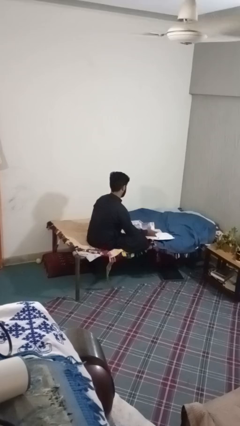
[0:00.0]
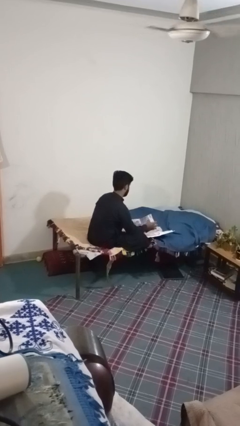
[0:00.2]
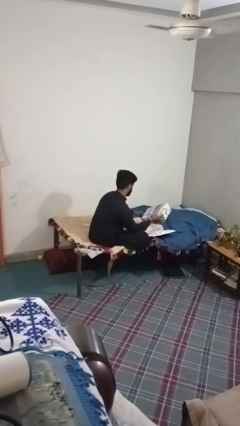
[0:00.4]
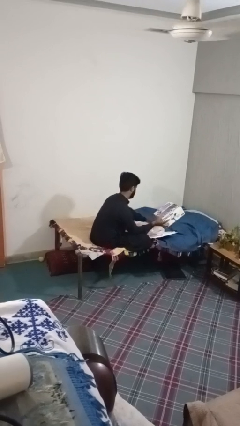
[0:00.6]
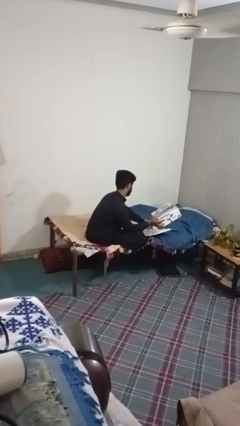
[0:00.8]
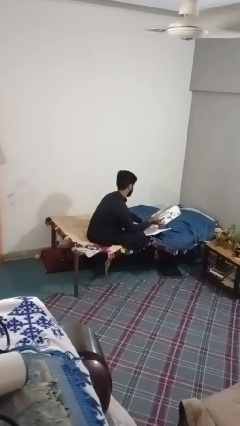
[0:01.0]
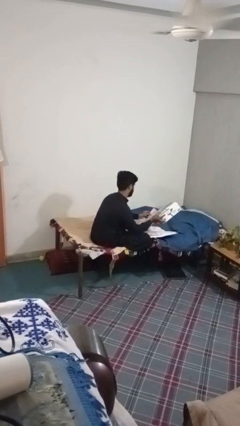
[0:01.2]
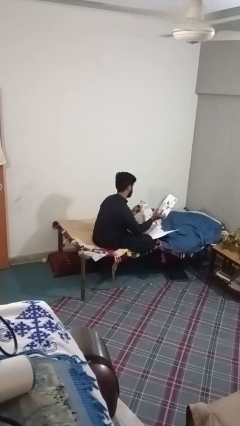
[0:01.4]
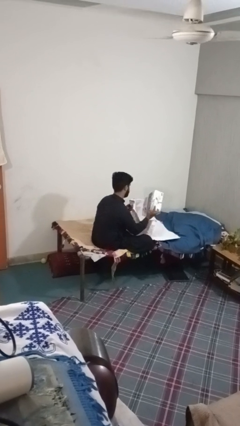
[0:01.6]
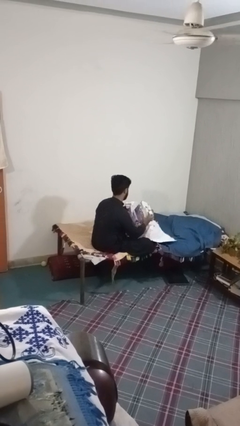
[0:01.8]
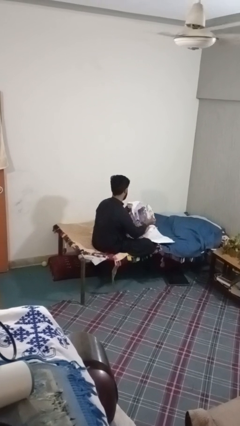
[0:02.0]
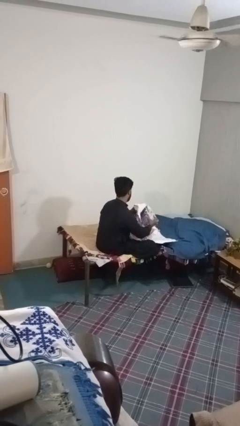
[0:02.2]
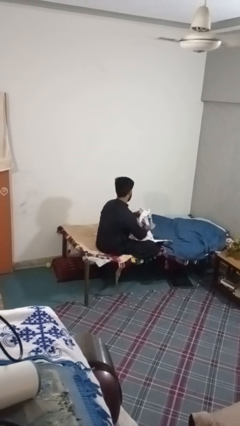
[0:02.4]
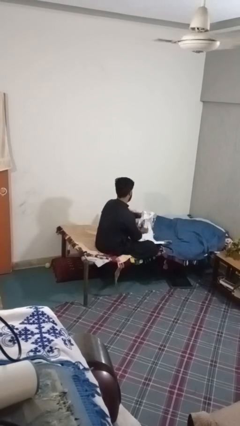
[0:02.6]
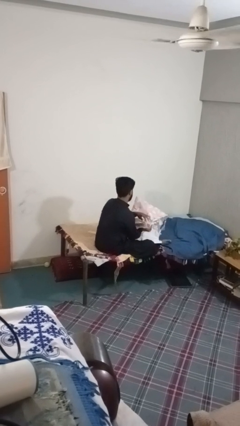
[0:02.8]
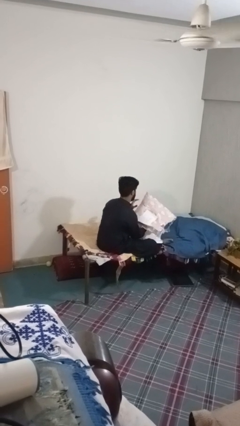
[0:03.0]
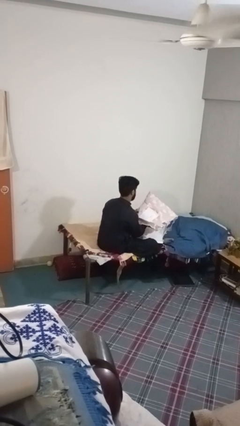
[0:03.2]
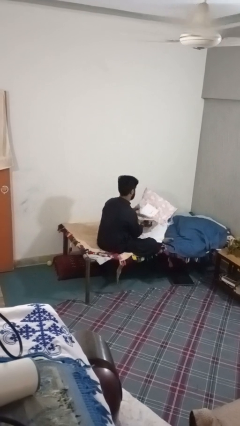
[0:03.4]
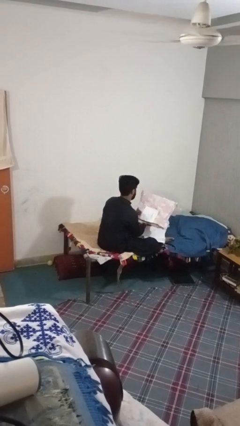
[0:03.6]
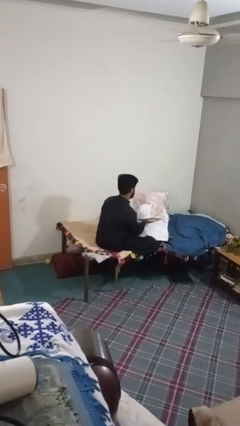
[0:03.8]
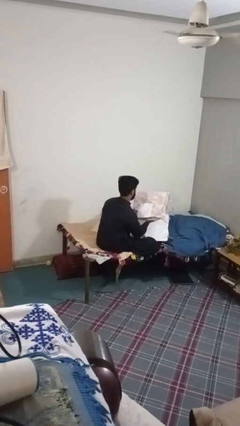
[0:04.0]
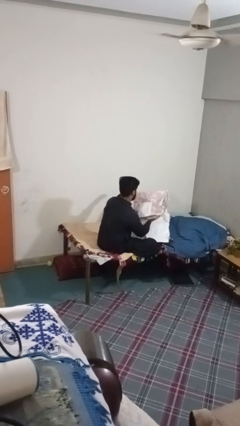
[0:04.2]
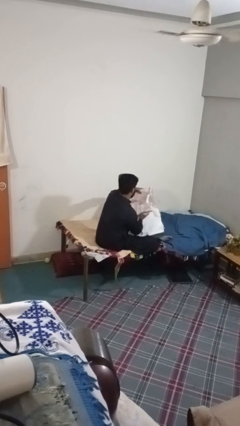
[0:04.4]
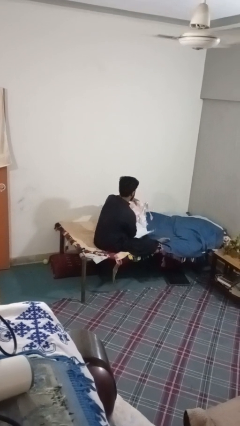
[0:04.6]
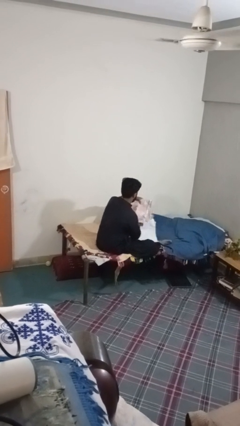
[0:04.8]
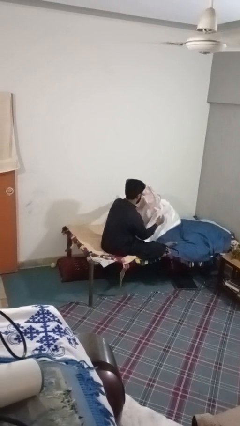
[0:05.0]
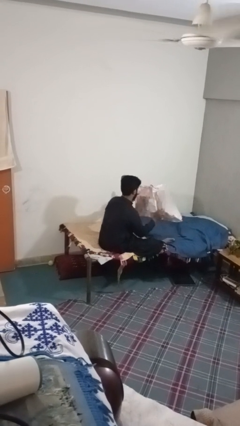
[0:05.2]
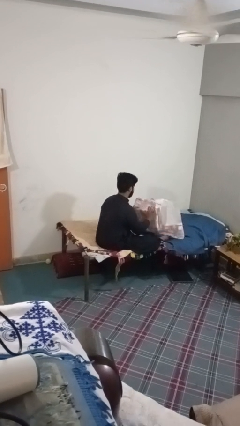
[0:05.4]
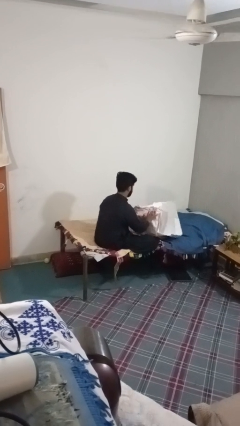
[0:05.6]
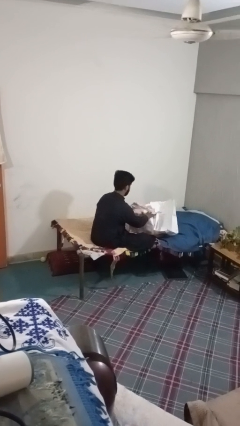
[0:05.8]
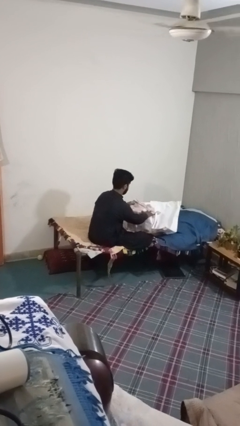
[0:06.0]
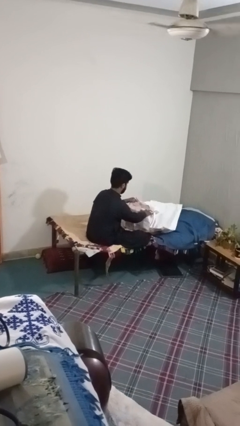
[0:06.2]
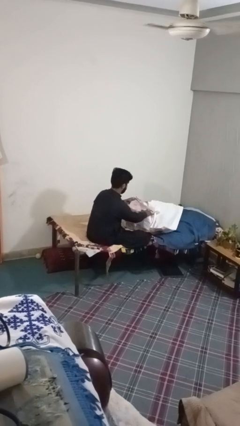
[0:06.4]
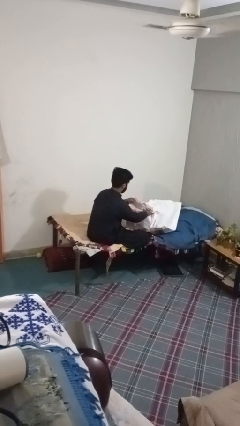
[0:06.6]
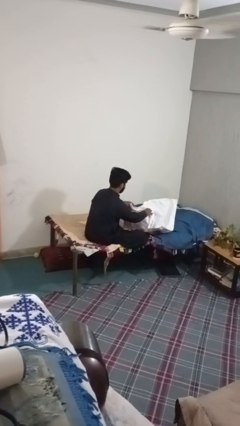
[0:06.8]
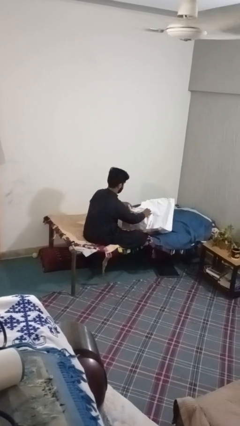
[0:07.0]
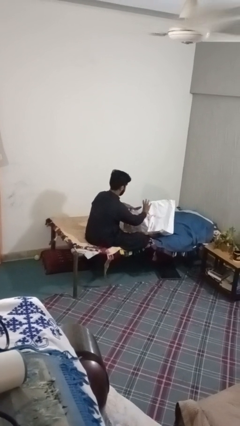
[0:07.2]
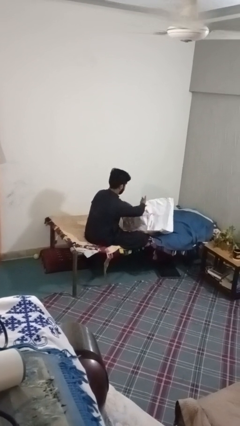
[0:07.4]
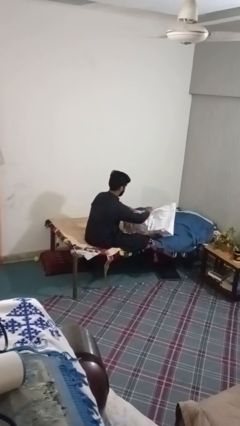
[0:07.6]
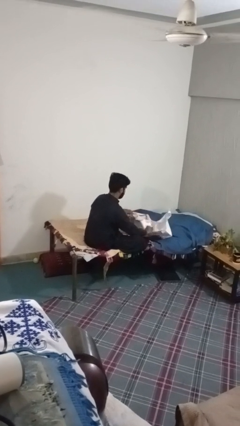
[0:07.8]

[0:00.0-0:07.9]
person wraps box

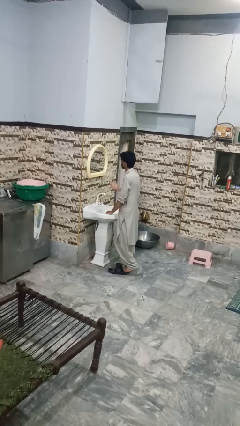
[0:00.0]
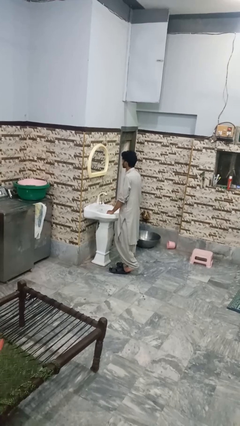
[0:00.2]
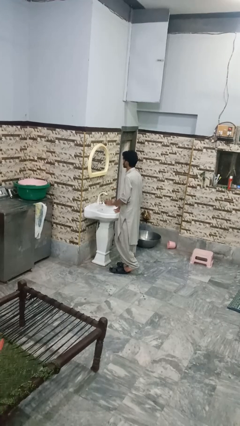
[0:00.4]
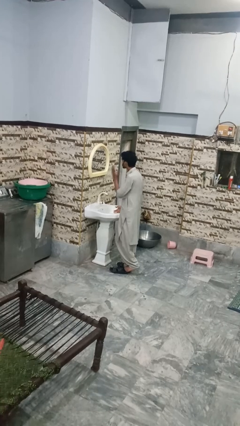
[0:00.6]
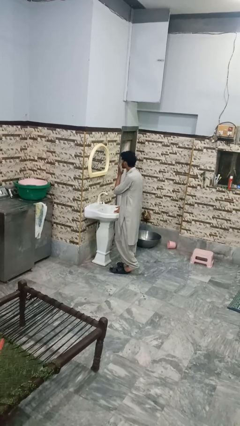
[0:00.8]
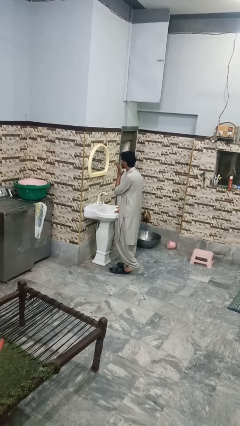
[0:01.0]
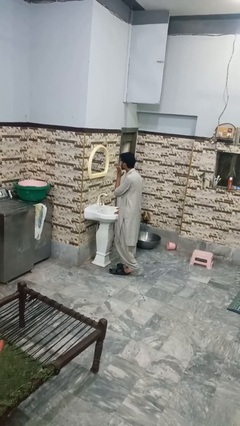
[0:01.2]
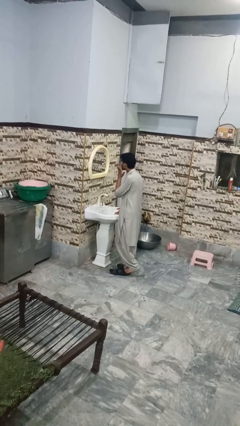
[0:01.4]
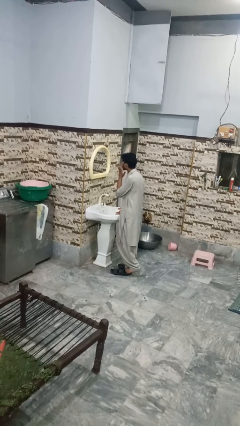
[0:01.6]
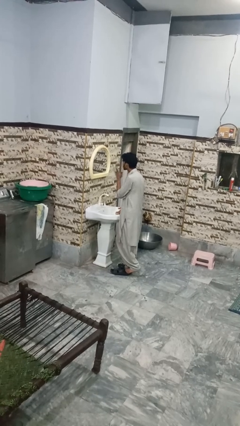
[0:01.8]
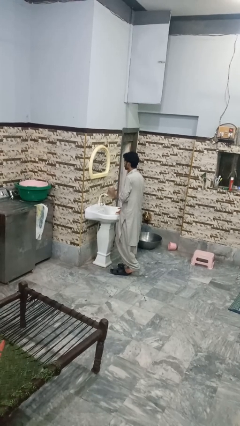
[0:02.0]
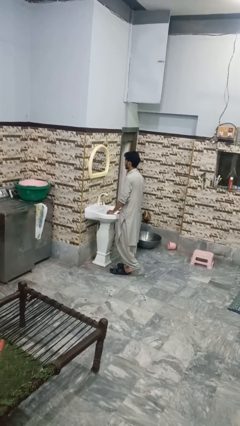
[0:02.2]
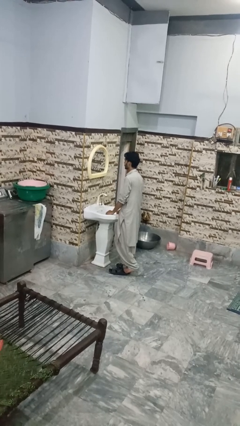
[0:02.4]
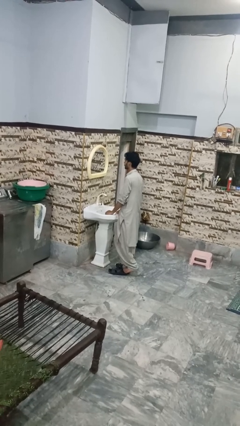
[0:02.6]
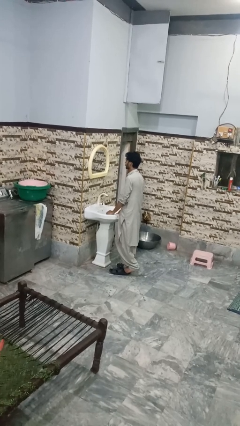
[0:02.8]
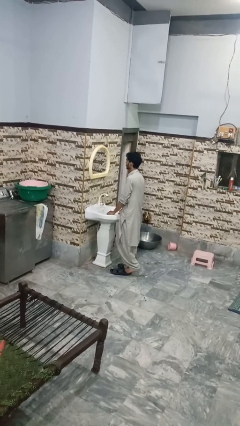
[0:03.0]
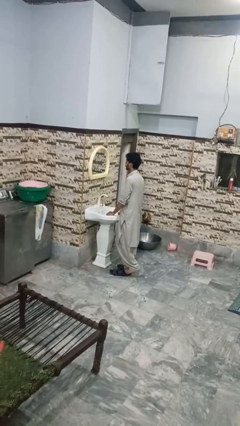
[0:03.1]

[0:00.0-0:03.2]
person shaves face

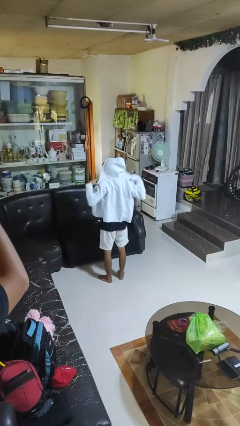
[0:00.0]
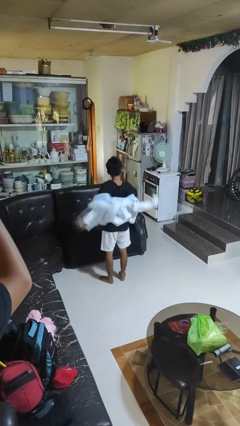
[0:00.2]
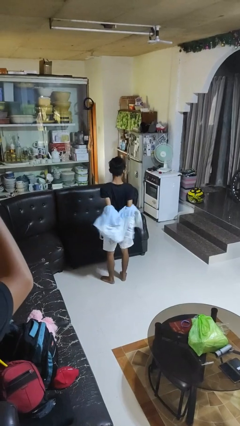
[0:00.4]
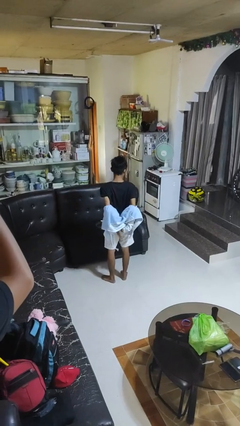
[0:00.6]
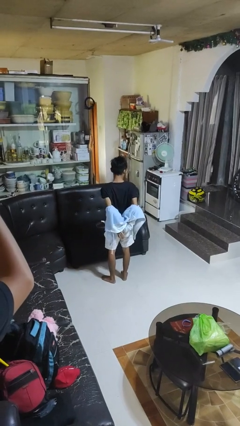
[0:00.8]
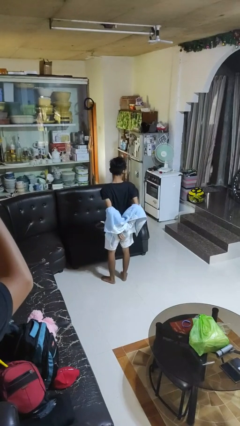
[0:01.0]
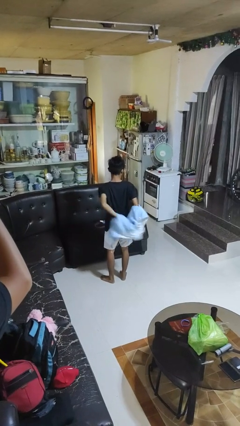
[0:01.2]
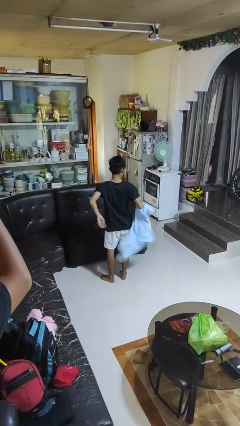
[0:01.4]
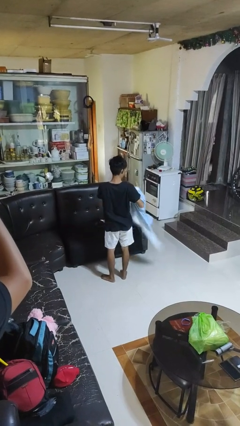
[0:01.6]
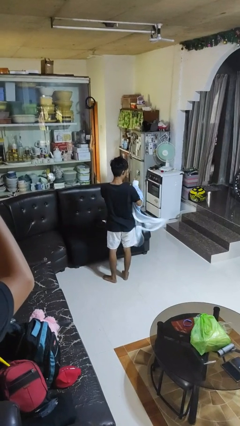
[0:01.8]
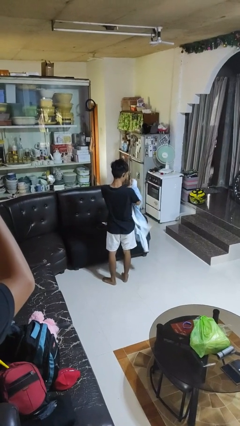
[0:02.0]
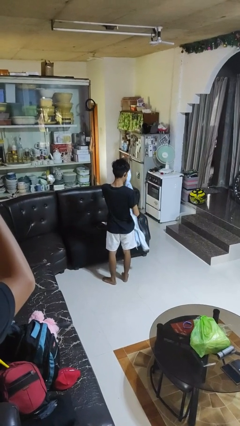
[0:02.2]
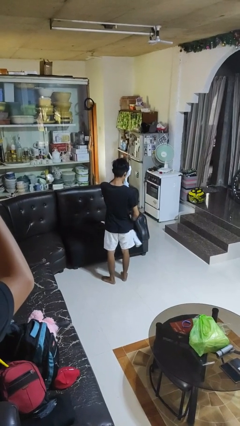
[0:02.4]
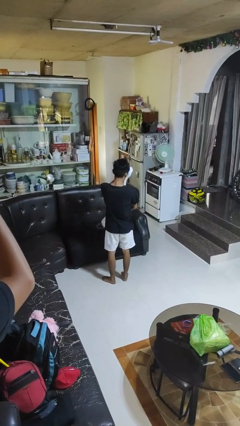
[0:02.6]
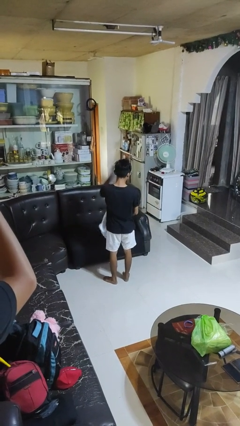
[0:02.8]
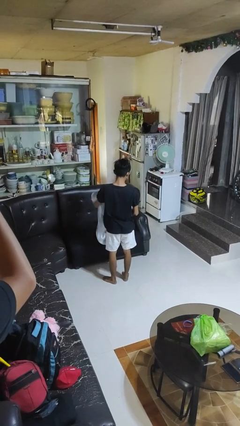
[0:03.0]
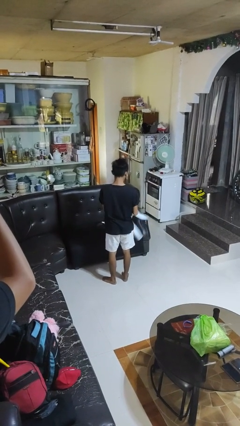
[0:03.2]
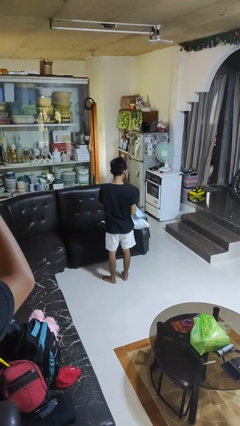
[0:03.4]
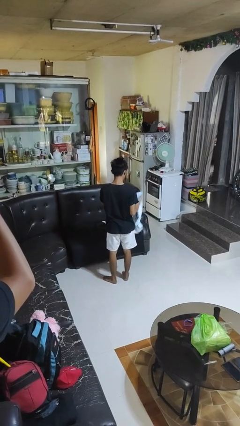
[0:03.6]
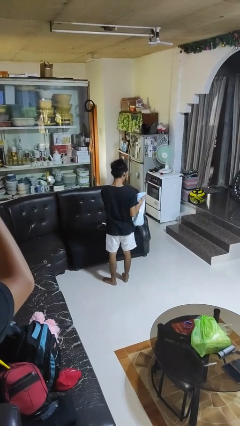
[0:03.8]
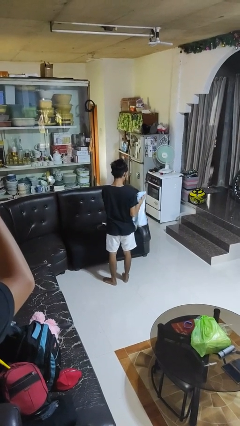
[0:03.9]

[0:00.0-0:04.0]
person takes off hoodie

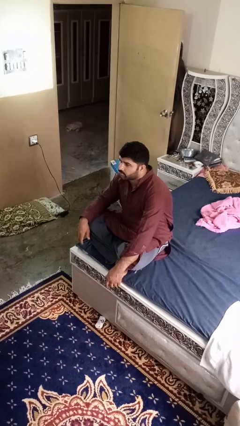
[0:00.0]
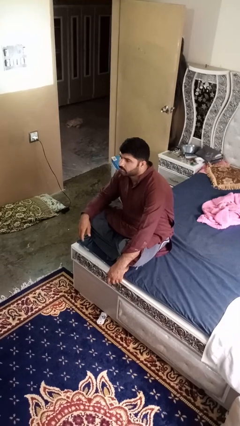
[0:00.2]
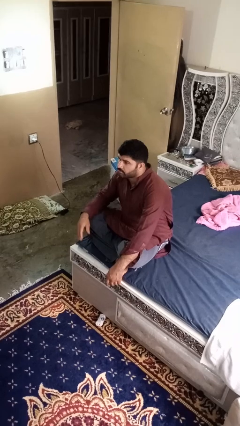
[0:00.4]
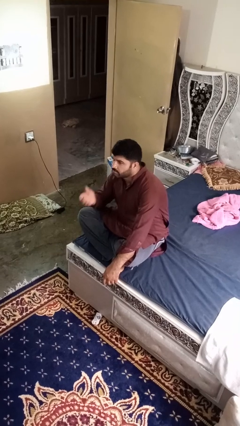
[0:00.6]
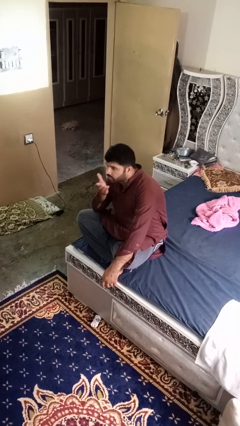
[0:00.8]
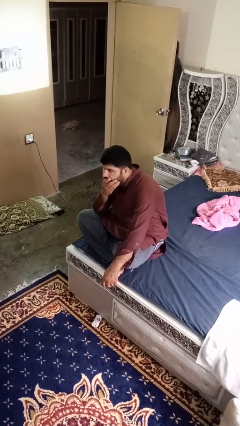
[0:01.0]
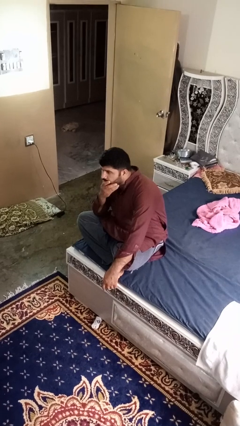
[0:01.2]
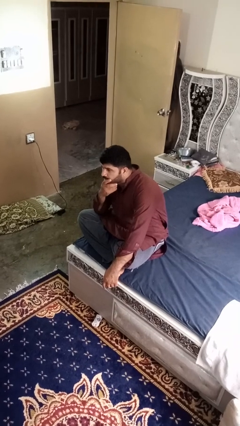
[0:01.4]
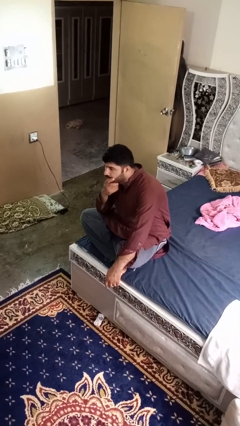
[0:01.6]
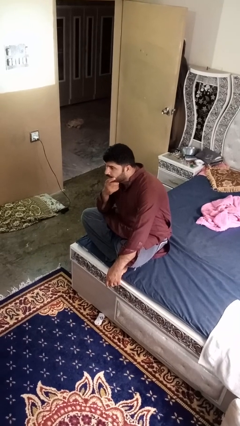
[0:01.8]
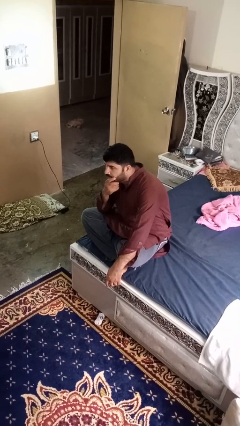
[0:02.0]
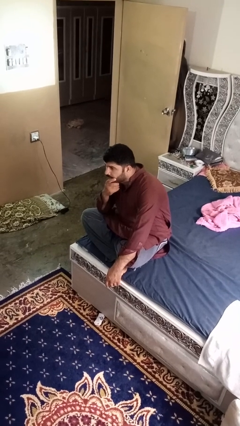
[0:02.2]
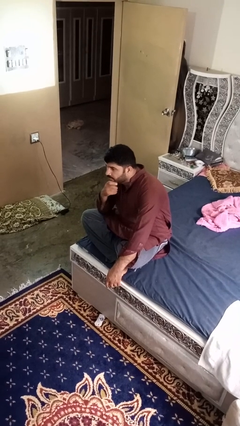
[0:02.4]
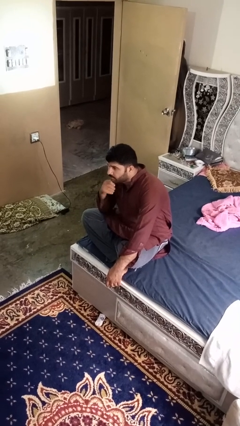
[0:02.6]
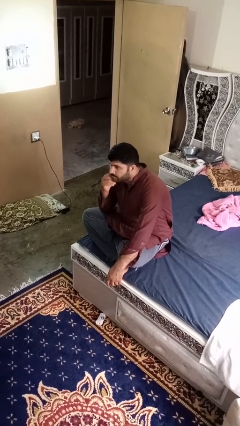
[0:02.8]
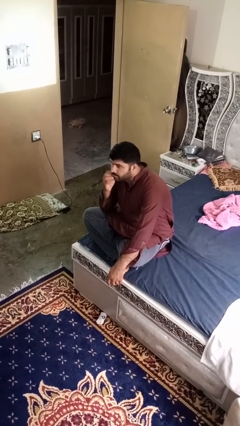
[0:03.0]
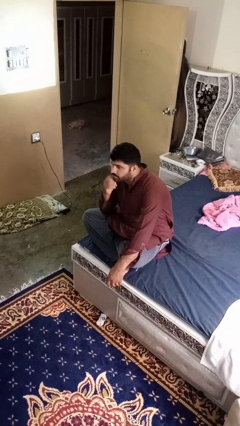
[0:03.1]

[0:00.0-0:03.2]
person strokes chin
